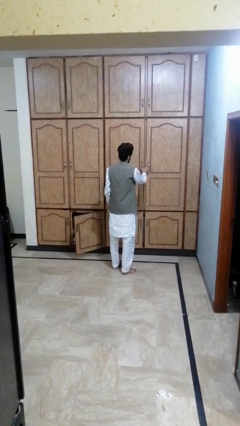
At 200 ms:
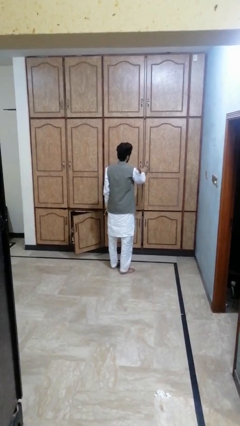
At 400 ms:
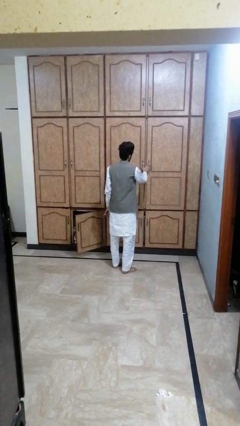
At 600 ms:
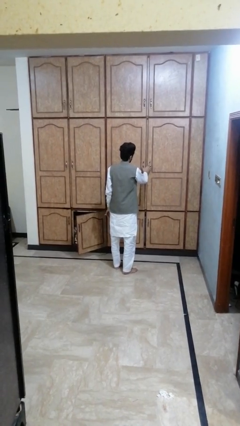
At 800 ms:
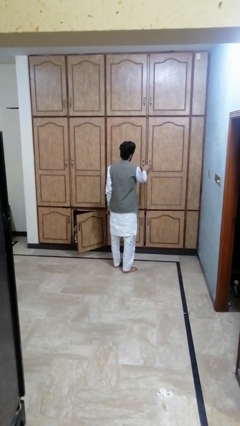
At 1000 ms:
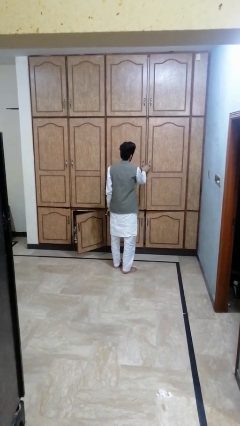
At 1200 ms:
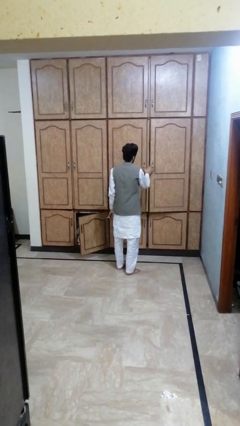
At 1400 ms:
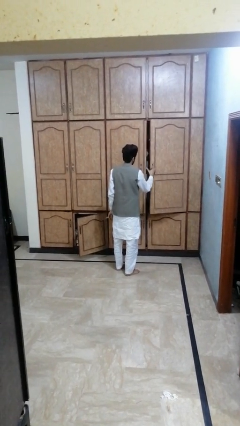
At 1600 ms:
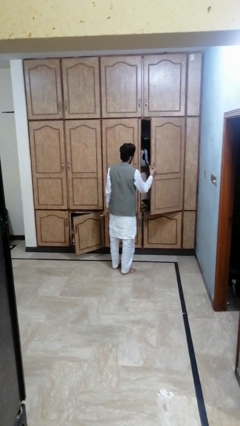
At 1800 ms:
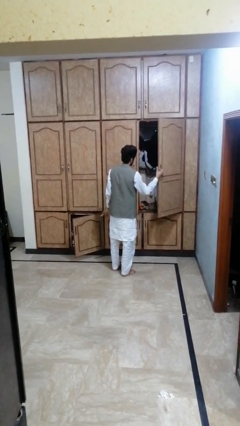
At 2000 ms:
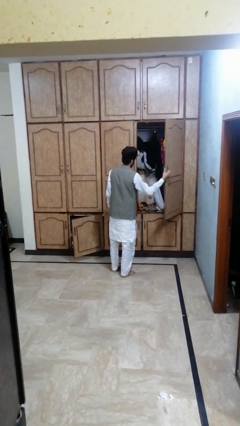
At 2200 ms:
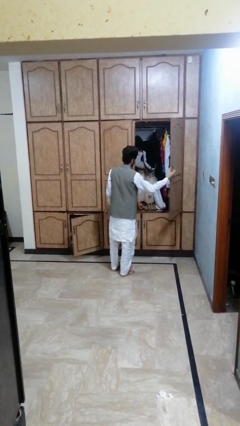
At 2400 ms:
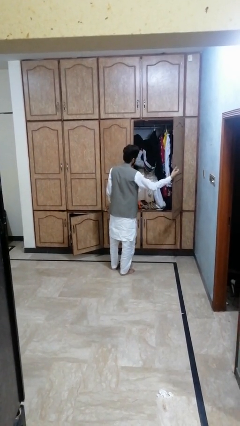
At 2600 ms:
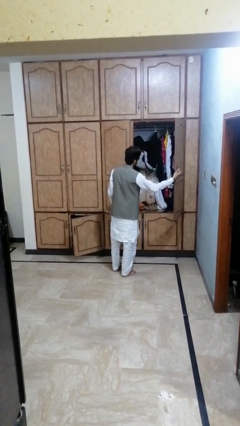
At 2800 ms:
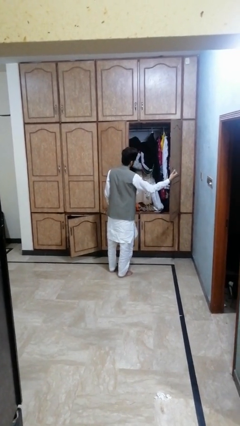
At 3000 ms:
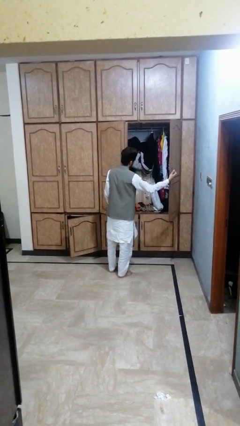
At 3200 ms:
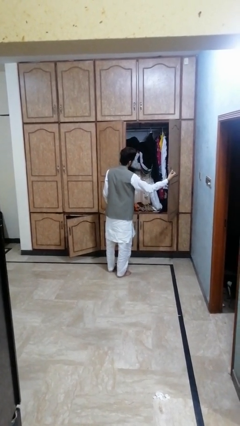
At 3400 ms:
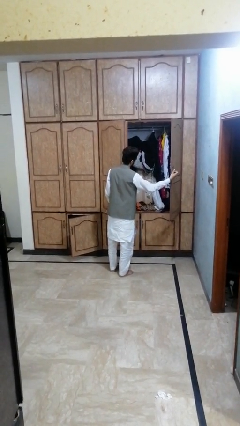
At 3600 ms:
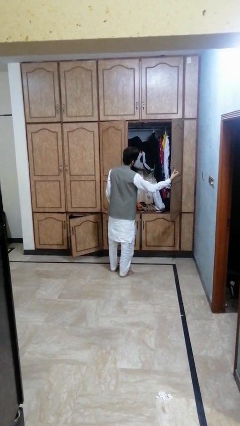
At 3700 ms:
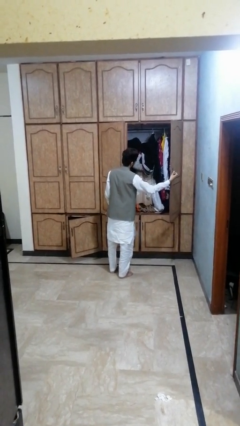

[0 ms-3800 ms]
person opens dresser drawer

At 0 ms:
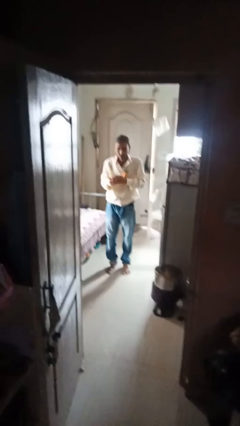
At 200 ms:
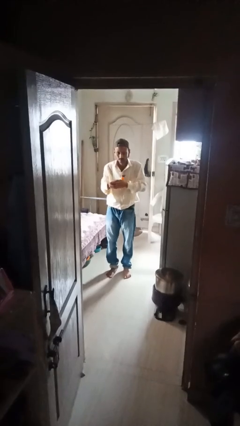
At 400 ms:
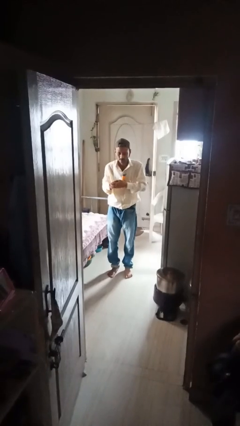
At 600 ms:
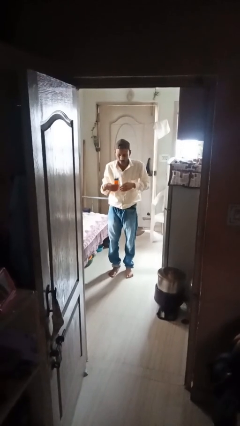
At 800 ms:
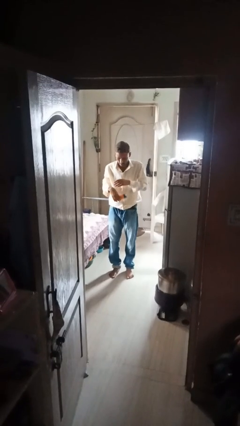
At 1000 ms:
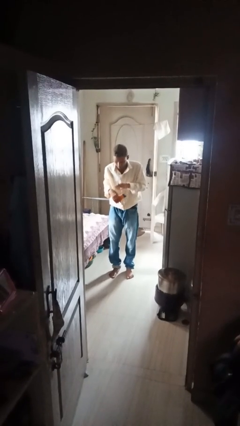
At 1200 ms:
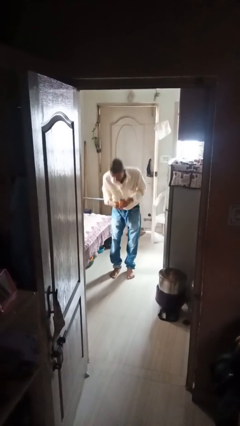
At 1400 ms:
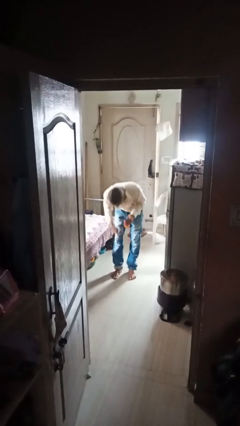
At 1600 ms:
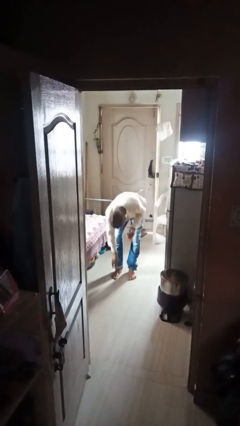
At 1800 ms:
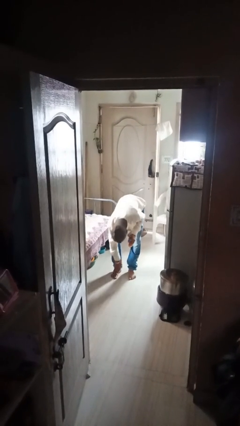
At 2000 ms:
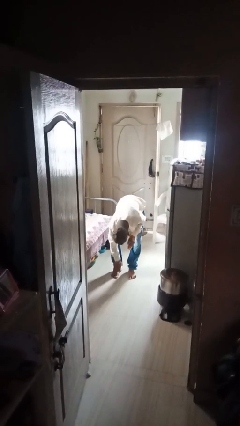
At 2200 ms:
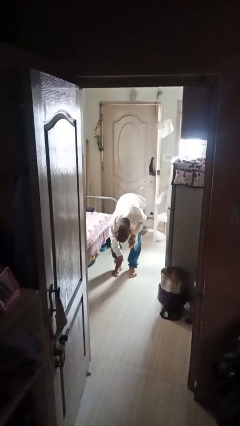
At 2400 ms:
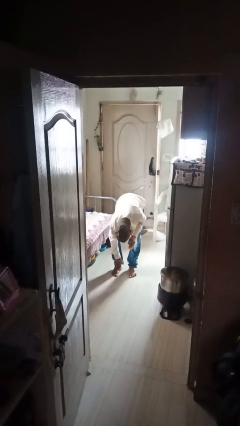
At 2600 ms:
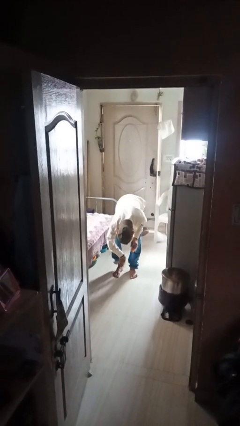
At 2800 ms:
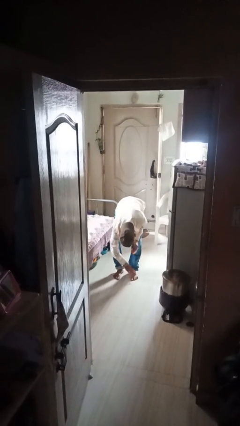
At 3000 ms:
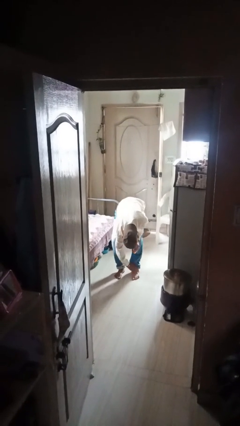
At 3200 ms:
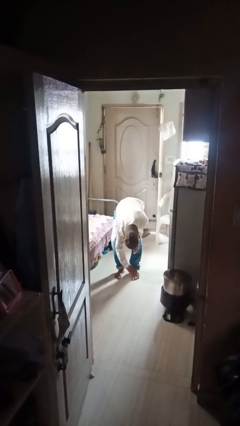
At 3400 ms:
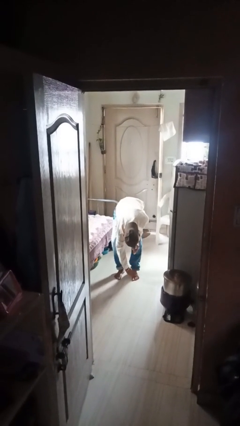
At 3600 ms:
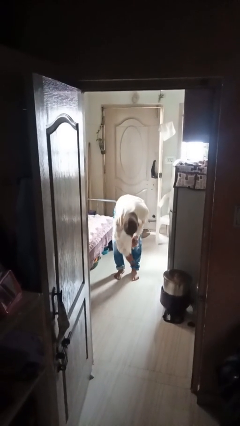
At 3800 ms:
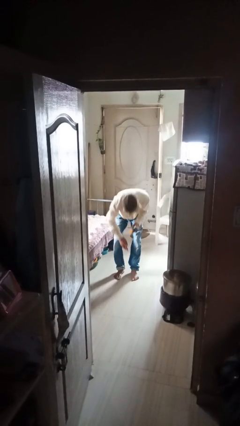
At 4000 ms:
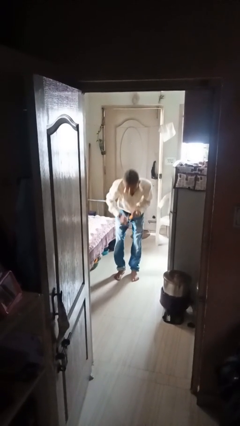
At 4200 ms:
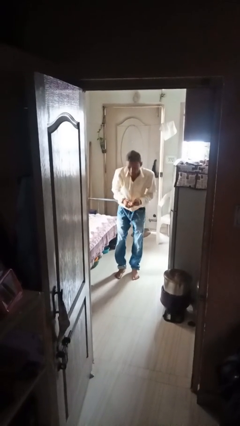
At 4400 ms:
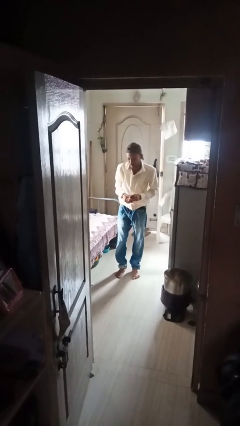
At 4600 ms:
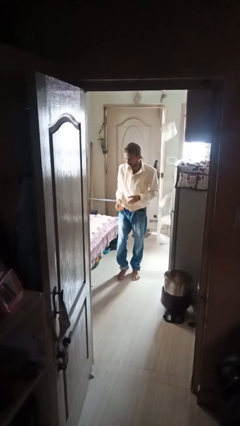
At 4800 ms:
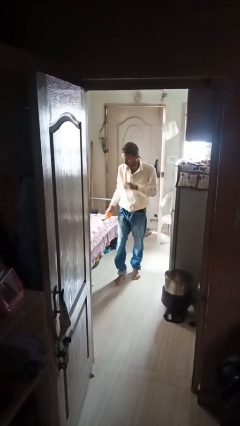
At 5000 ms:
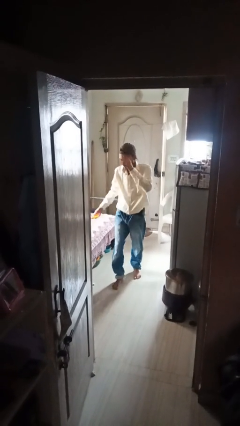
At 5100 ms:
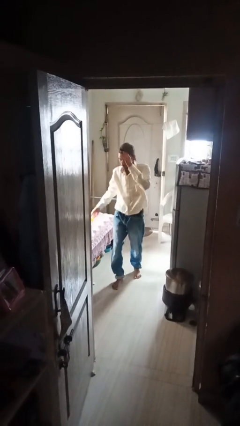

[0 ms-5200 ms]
person applies sunscreen

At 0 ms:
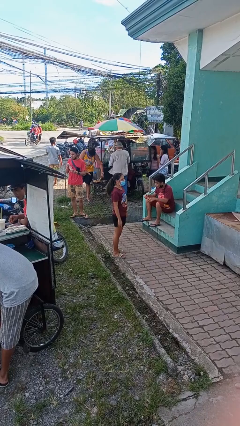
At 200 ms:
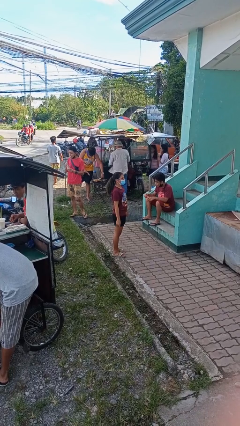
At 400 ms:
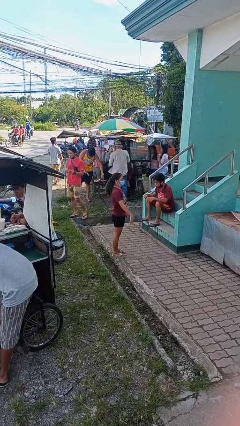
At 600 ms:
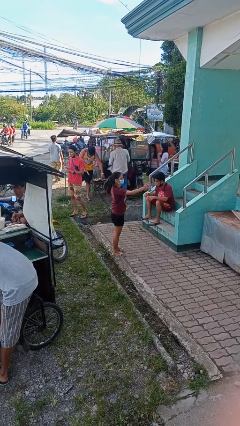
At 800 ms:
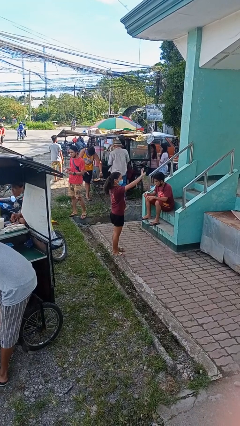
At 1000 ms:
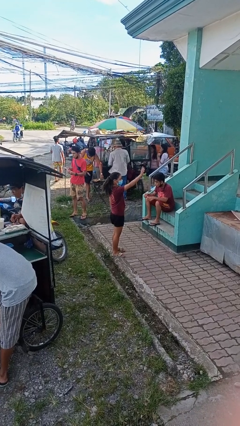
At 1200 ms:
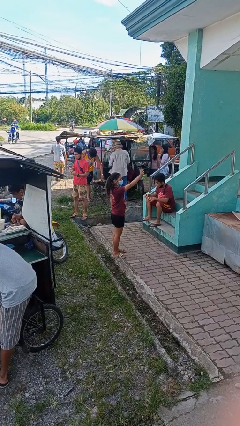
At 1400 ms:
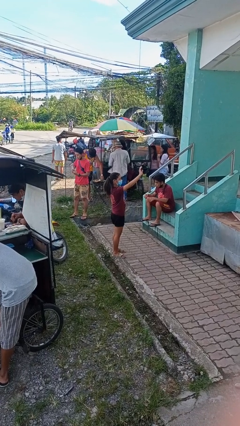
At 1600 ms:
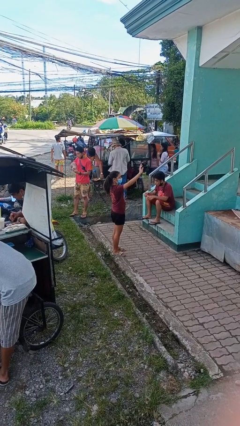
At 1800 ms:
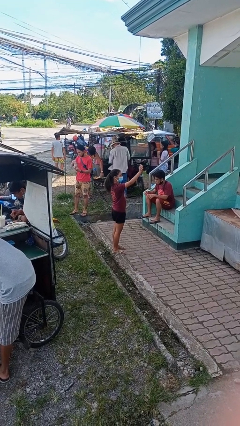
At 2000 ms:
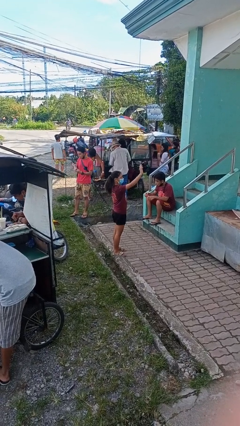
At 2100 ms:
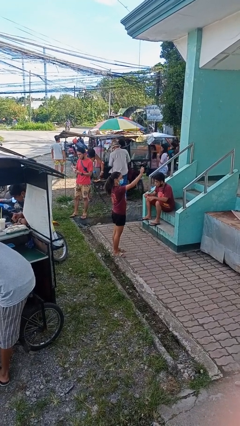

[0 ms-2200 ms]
person waves at person

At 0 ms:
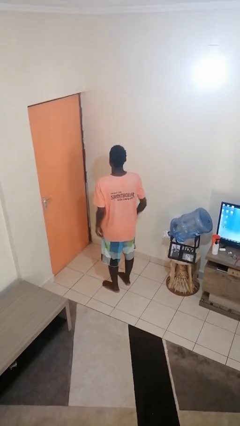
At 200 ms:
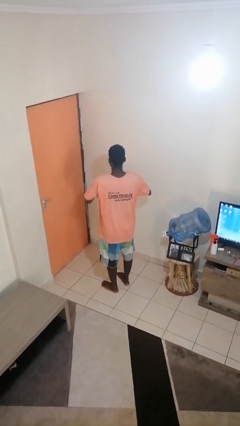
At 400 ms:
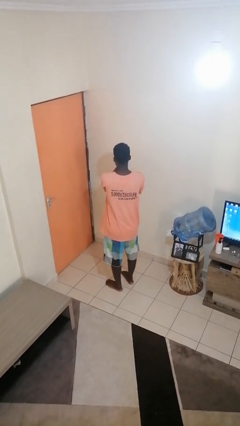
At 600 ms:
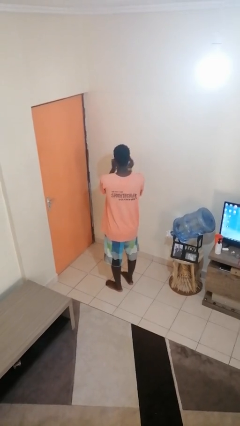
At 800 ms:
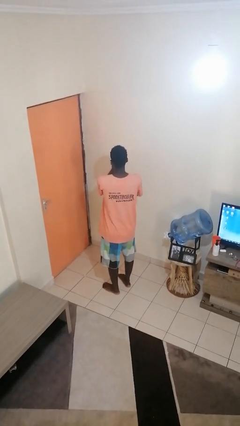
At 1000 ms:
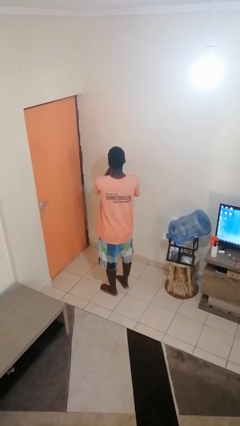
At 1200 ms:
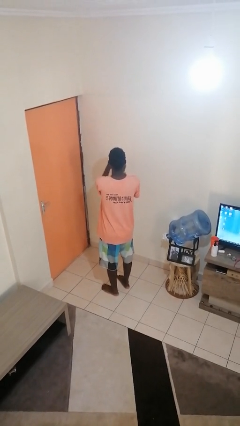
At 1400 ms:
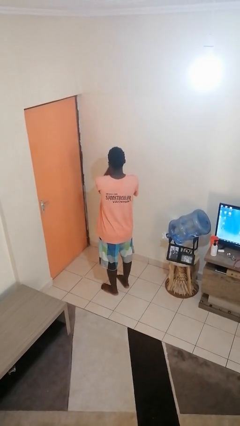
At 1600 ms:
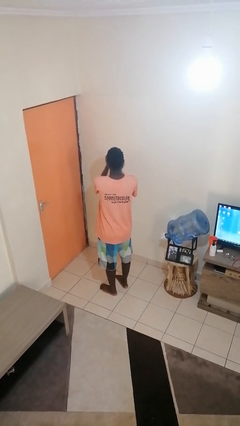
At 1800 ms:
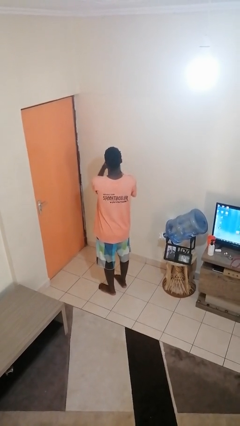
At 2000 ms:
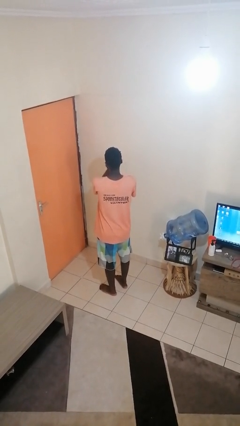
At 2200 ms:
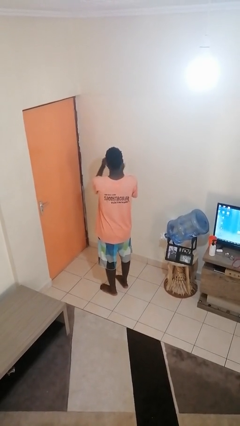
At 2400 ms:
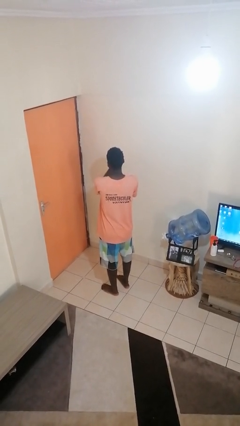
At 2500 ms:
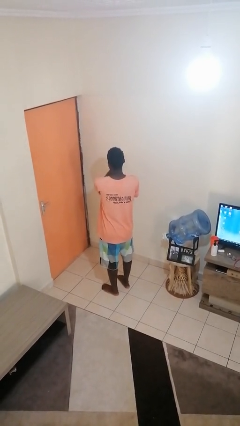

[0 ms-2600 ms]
person claps hands

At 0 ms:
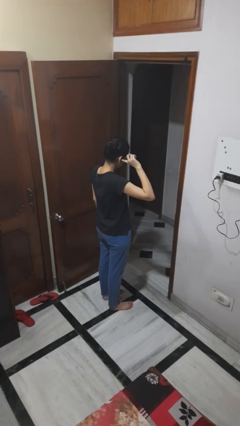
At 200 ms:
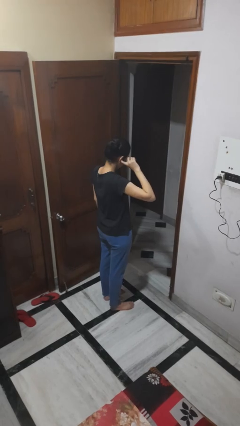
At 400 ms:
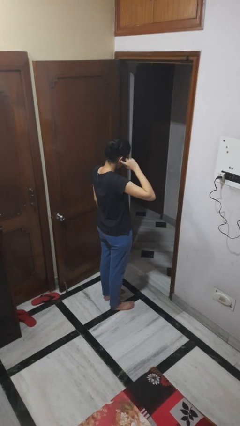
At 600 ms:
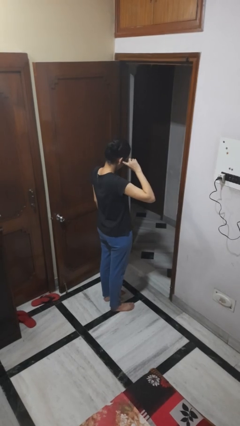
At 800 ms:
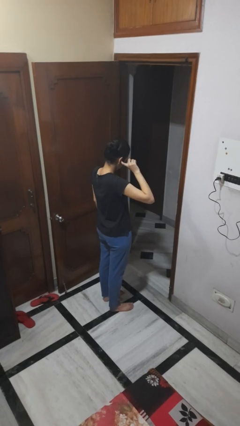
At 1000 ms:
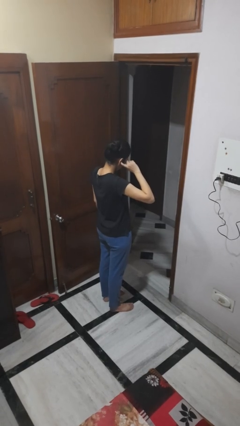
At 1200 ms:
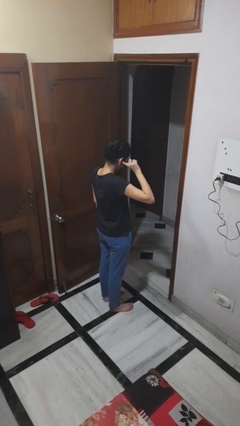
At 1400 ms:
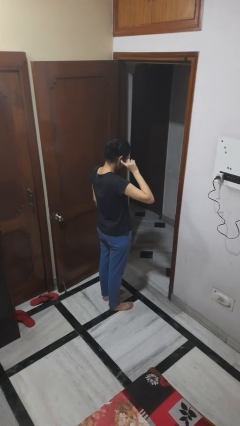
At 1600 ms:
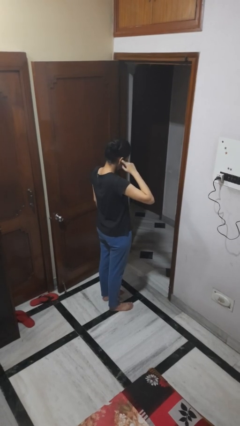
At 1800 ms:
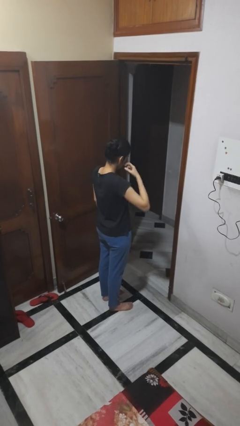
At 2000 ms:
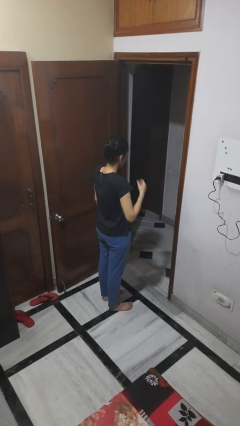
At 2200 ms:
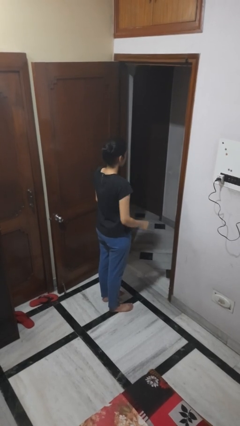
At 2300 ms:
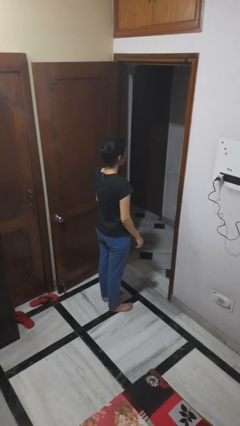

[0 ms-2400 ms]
person puts fingers in ear

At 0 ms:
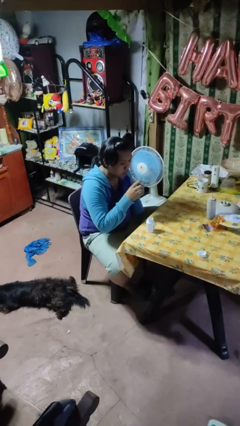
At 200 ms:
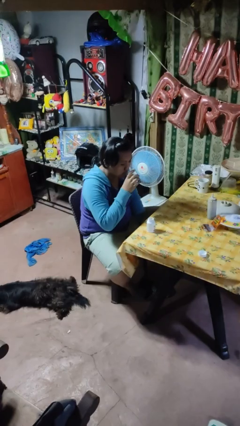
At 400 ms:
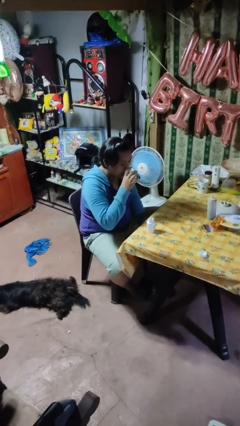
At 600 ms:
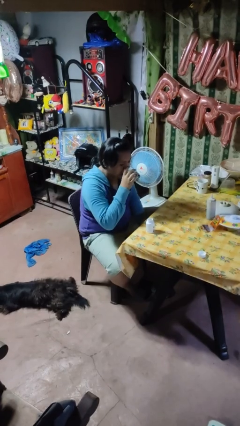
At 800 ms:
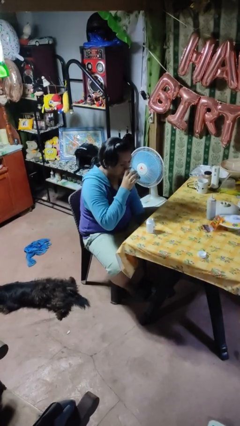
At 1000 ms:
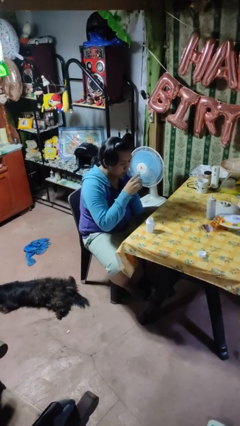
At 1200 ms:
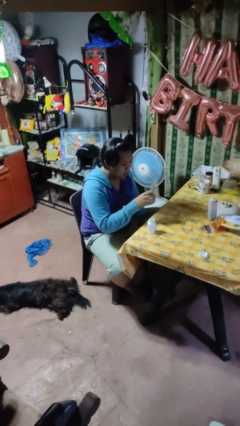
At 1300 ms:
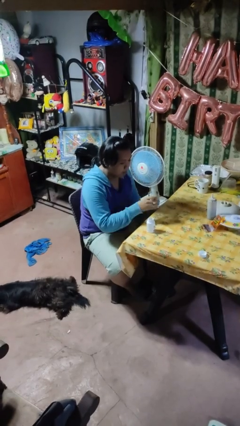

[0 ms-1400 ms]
person drinks from cup
